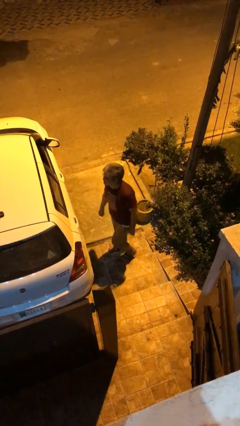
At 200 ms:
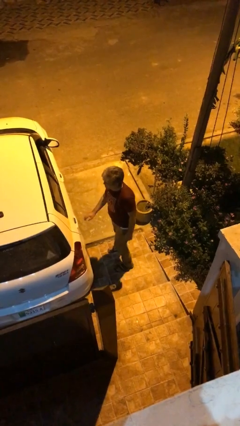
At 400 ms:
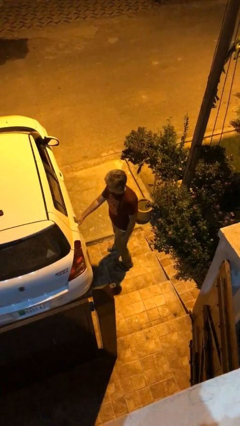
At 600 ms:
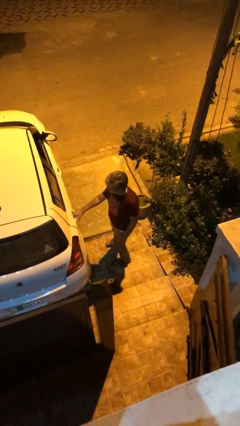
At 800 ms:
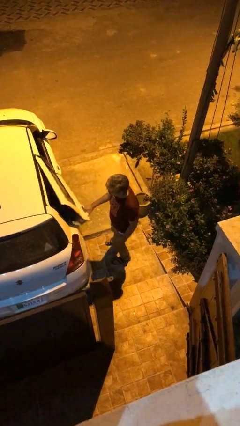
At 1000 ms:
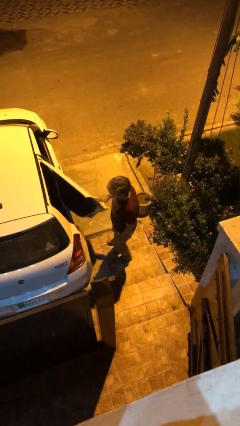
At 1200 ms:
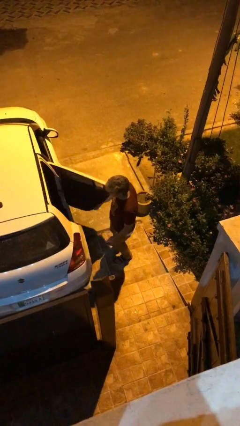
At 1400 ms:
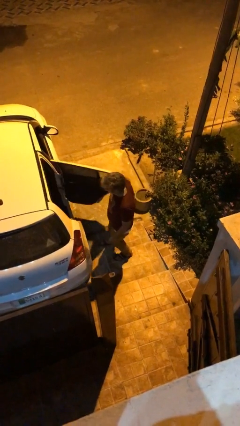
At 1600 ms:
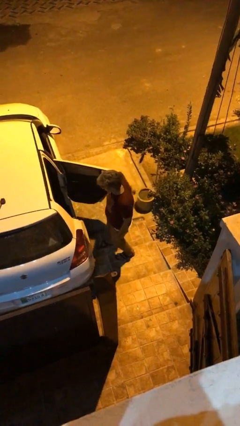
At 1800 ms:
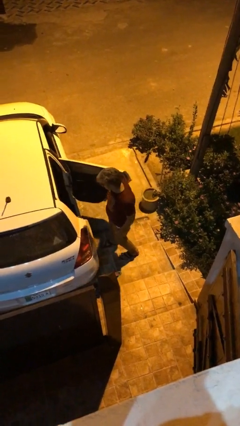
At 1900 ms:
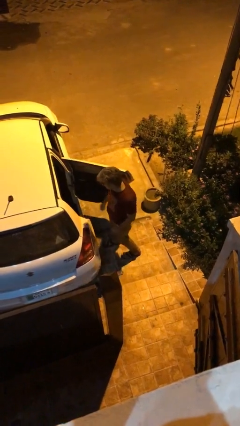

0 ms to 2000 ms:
person opens car door

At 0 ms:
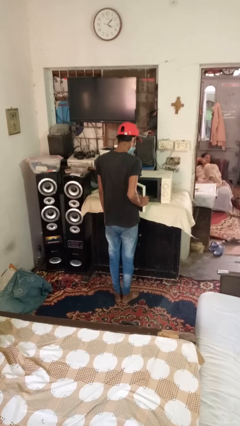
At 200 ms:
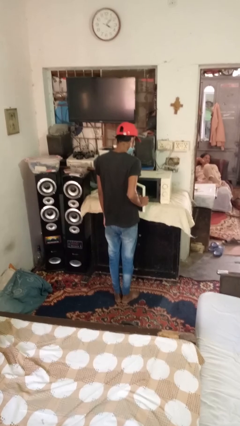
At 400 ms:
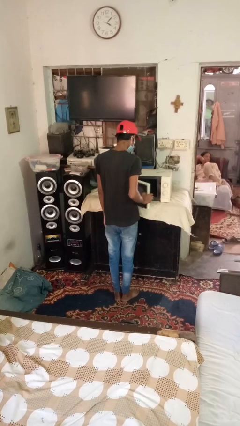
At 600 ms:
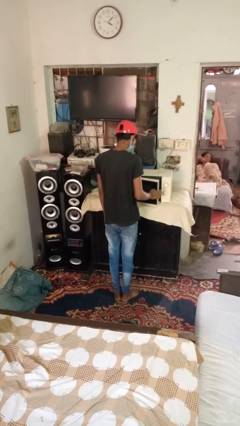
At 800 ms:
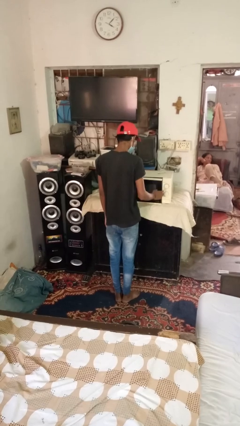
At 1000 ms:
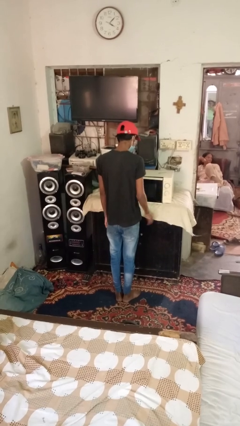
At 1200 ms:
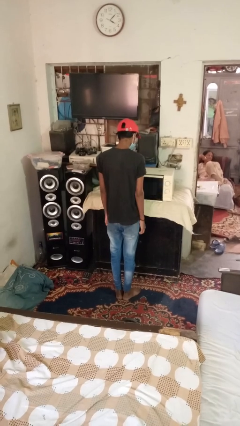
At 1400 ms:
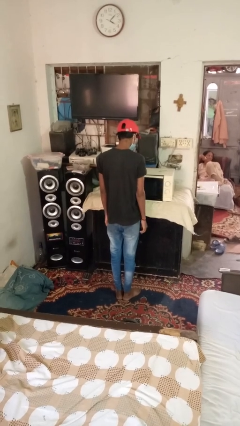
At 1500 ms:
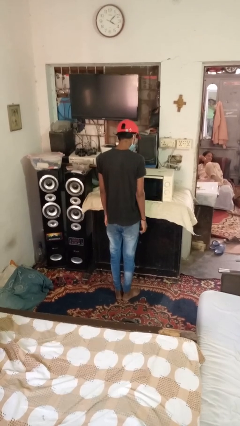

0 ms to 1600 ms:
person closes dishwasher

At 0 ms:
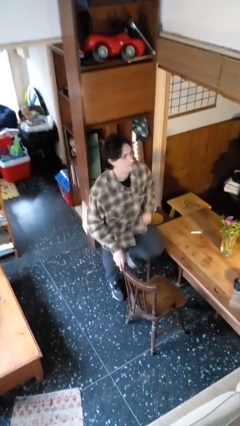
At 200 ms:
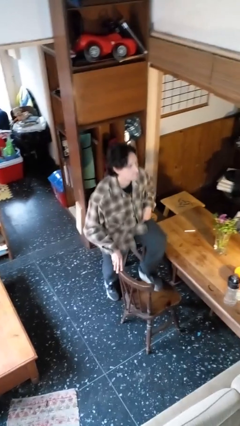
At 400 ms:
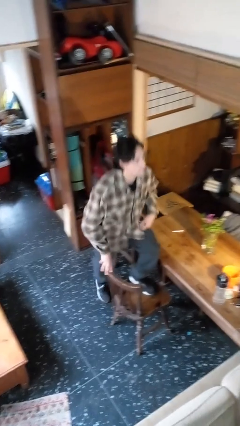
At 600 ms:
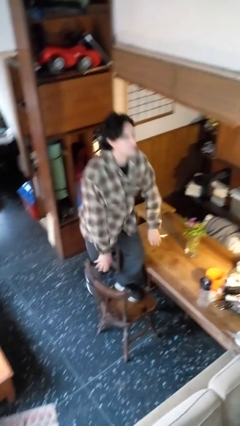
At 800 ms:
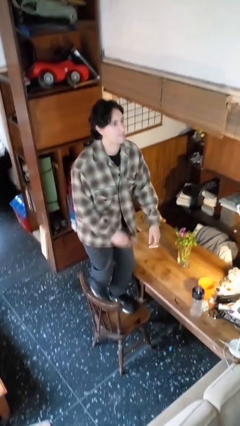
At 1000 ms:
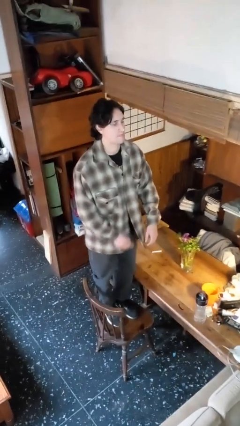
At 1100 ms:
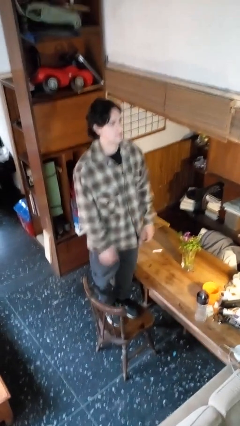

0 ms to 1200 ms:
person climbs on chair

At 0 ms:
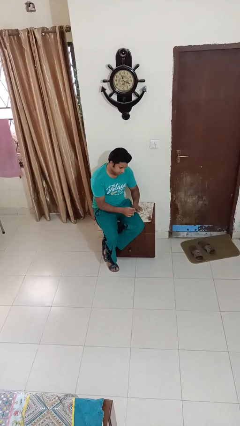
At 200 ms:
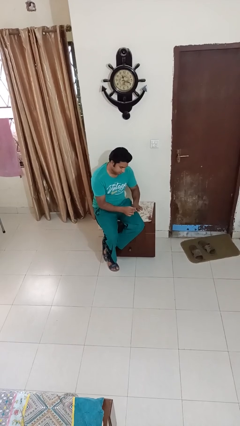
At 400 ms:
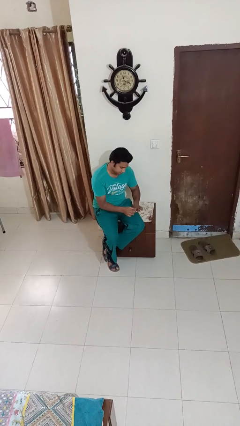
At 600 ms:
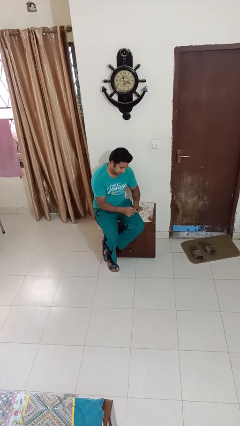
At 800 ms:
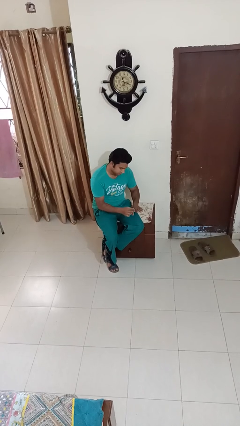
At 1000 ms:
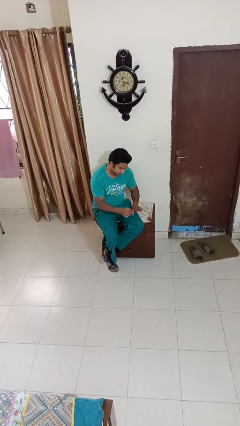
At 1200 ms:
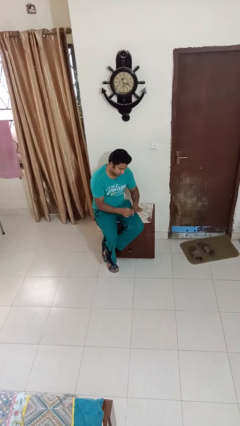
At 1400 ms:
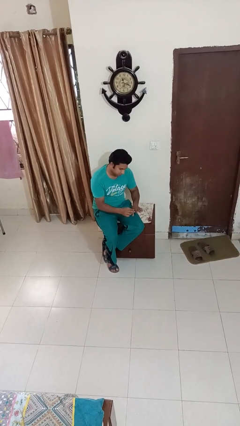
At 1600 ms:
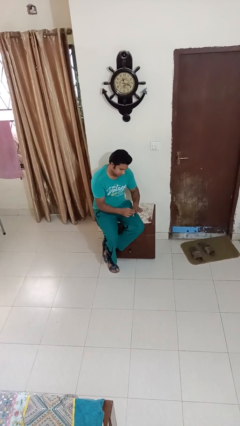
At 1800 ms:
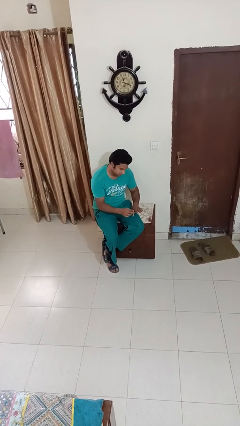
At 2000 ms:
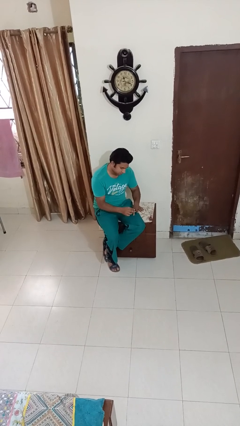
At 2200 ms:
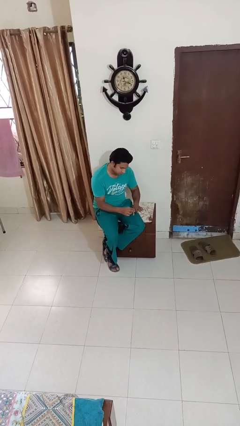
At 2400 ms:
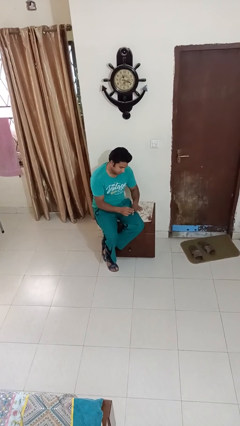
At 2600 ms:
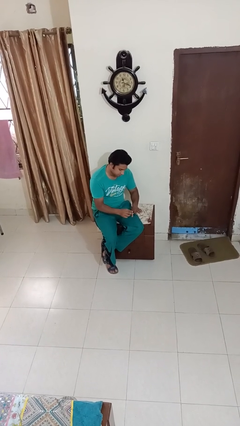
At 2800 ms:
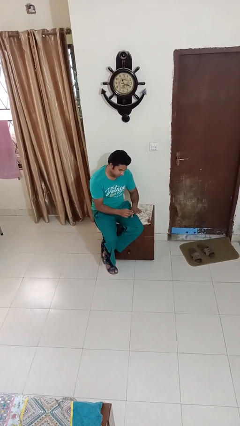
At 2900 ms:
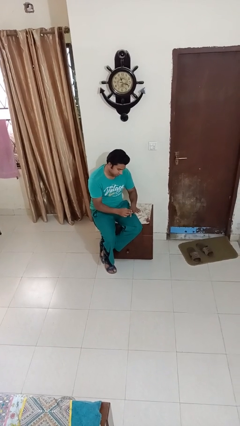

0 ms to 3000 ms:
person paints fingernails

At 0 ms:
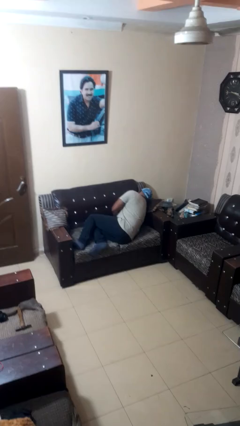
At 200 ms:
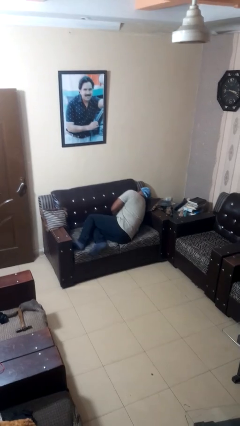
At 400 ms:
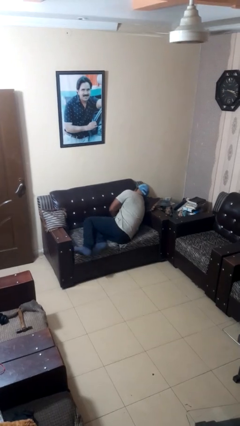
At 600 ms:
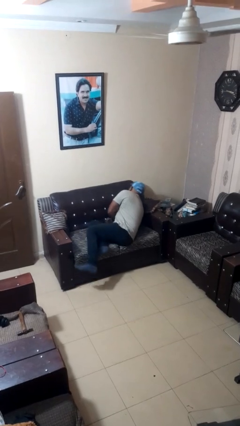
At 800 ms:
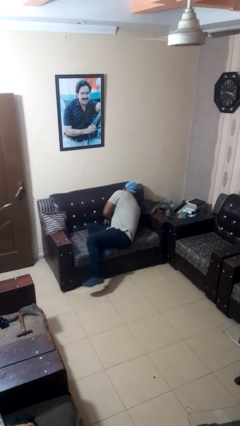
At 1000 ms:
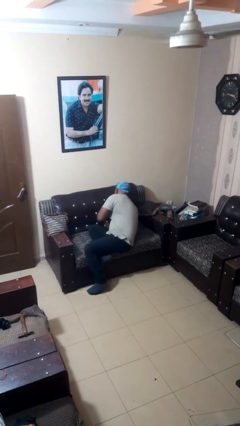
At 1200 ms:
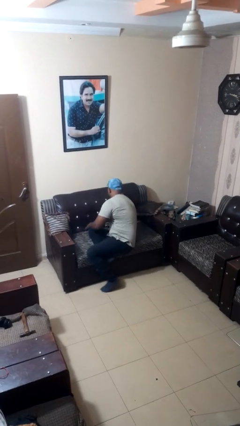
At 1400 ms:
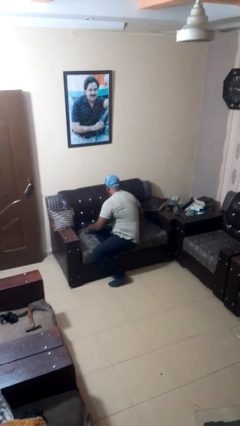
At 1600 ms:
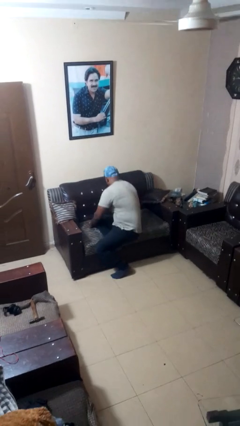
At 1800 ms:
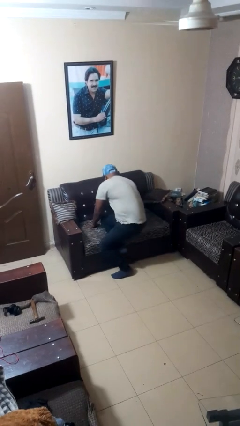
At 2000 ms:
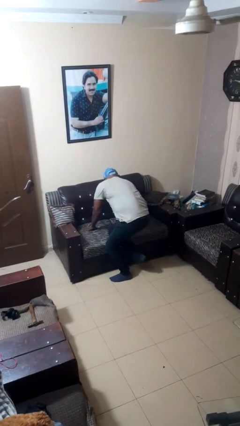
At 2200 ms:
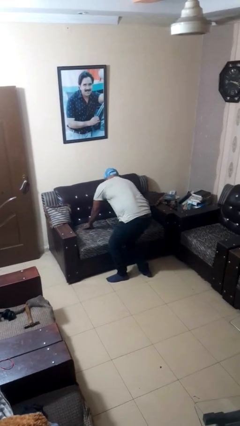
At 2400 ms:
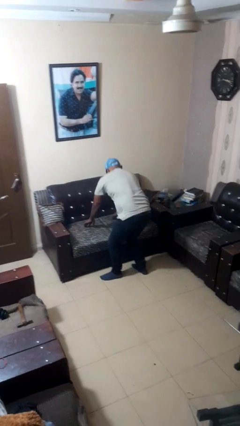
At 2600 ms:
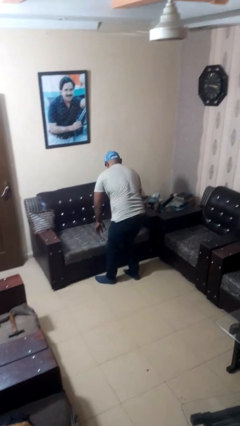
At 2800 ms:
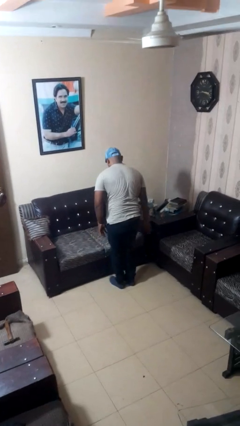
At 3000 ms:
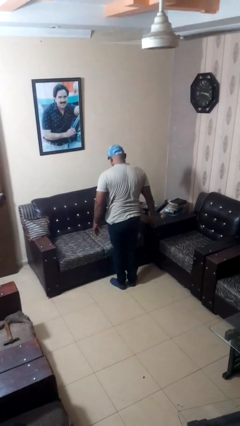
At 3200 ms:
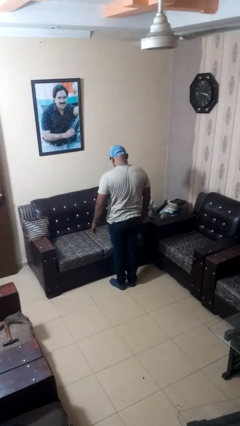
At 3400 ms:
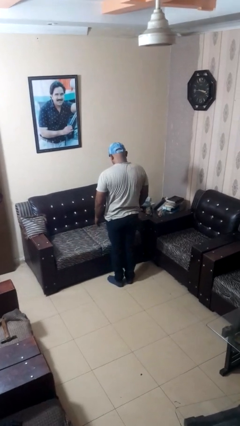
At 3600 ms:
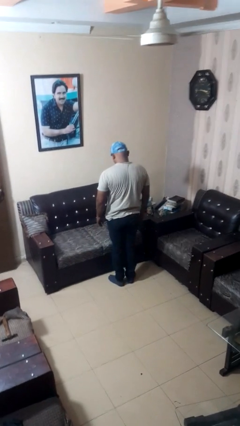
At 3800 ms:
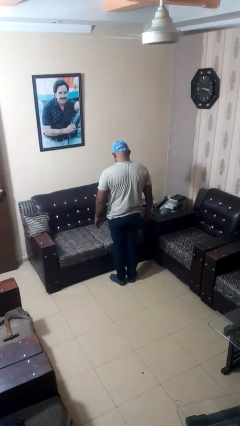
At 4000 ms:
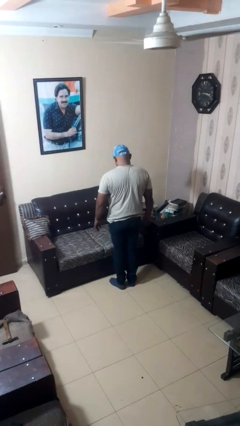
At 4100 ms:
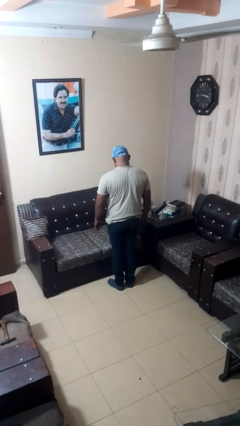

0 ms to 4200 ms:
person stands up

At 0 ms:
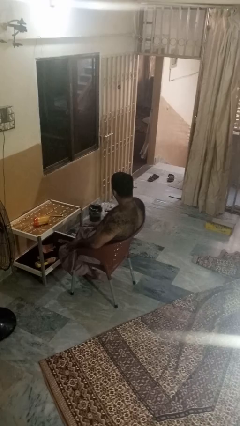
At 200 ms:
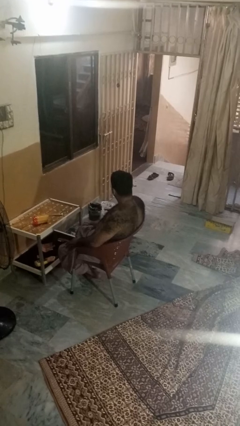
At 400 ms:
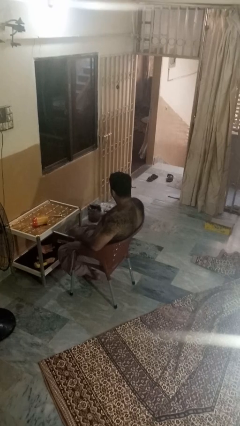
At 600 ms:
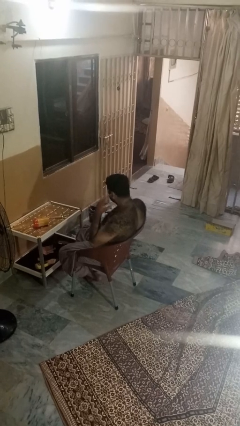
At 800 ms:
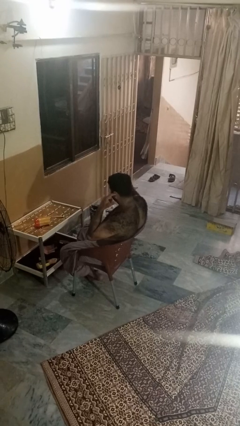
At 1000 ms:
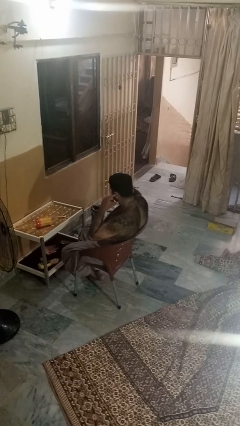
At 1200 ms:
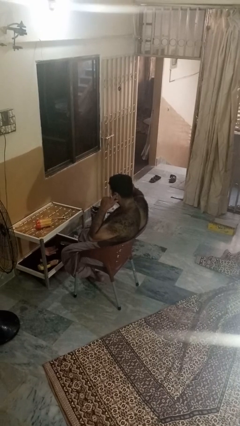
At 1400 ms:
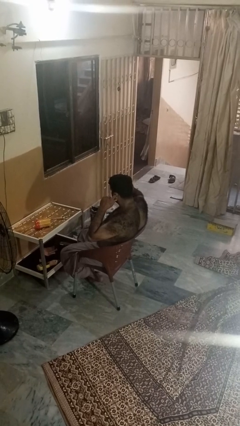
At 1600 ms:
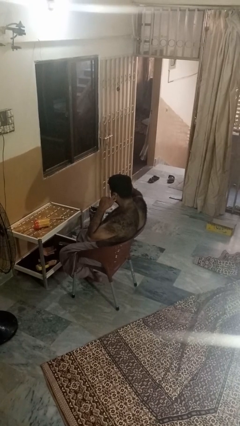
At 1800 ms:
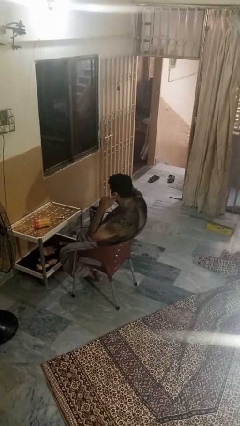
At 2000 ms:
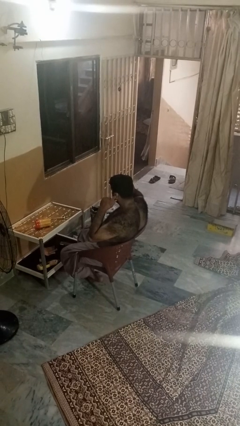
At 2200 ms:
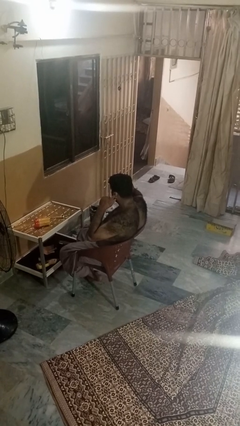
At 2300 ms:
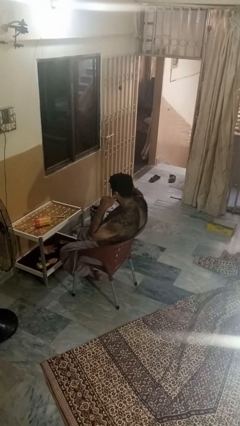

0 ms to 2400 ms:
person puts fingers in ear

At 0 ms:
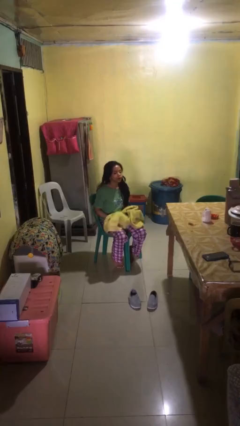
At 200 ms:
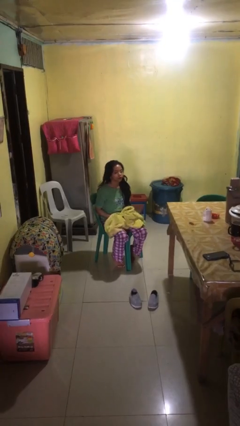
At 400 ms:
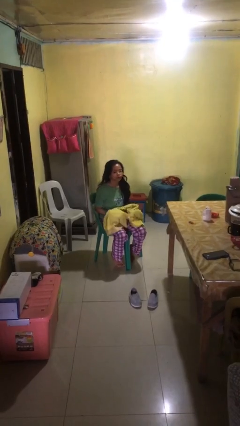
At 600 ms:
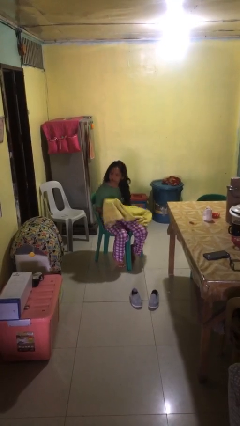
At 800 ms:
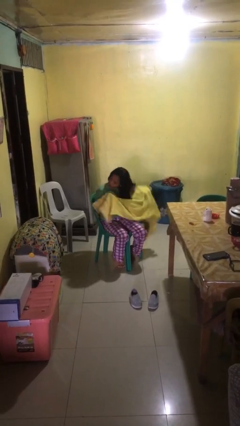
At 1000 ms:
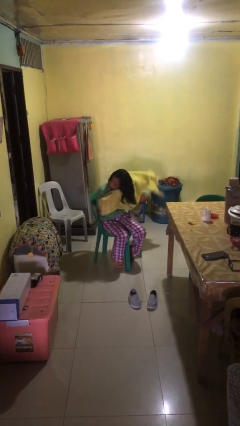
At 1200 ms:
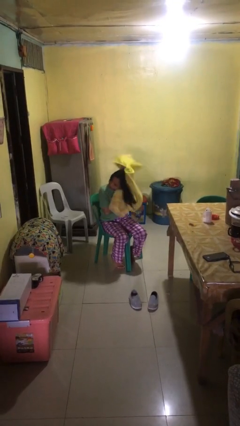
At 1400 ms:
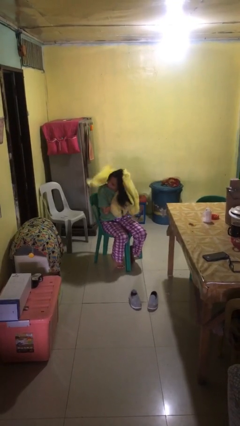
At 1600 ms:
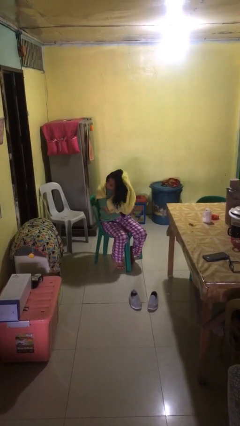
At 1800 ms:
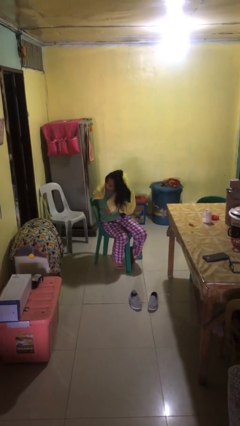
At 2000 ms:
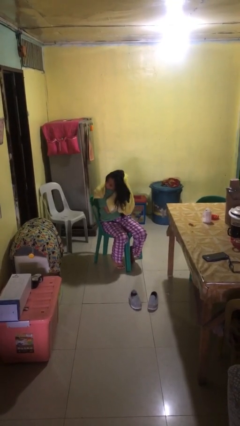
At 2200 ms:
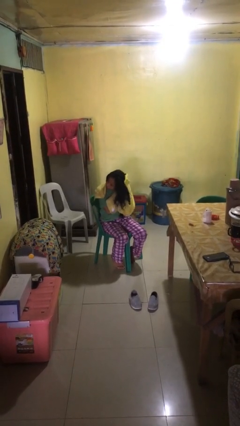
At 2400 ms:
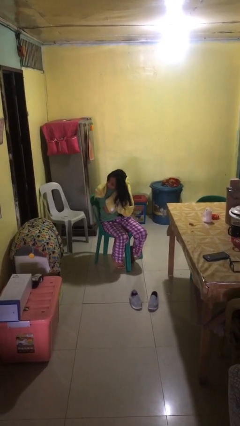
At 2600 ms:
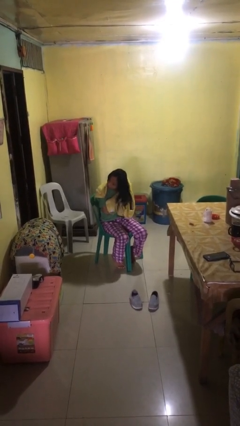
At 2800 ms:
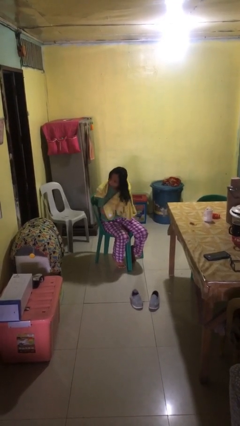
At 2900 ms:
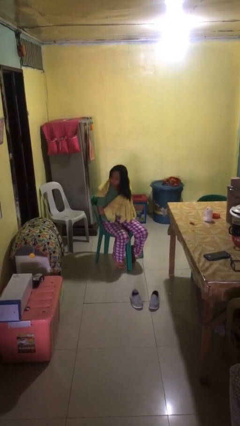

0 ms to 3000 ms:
person dries hair with towel
